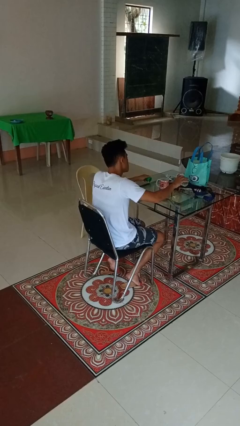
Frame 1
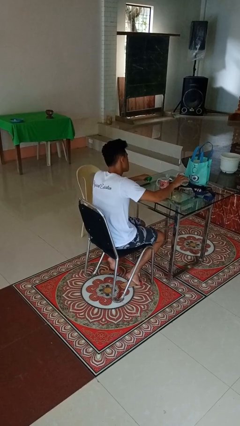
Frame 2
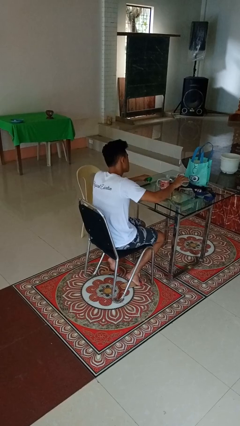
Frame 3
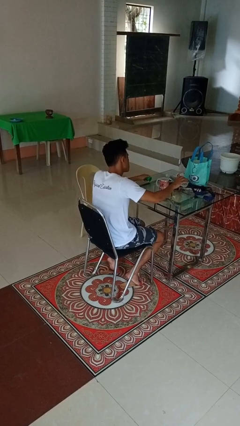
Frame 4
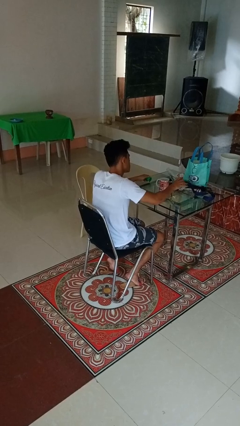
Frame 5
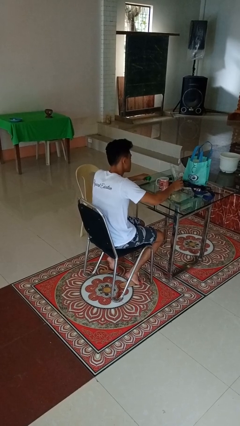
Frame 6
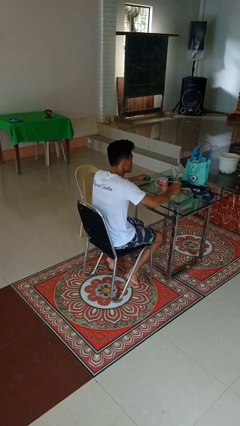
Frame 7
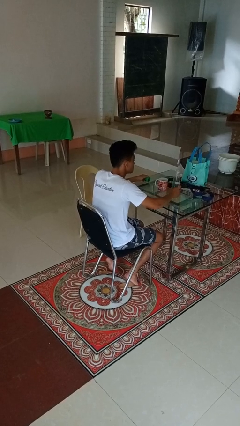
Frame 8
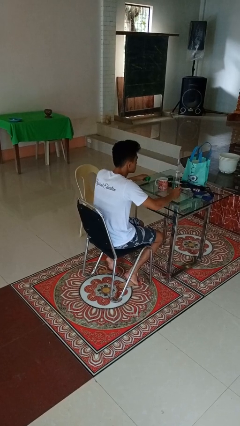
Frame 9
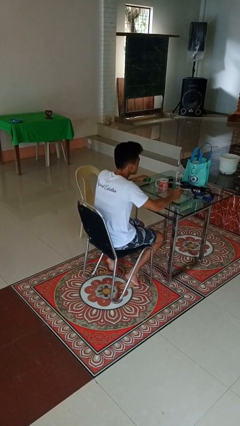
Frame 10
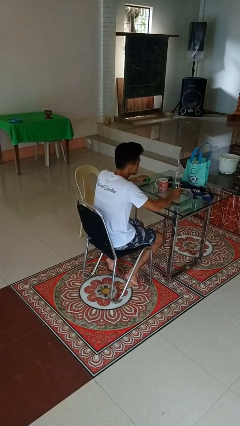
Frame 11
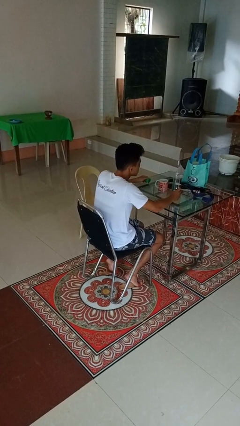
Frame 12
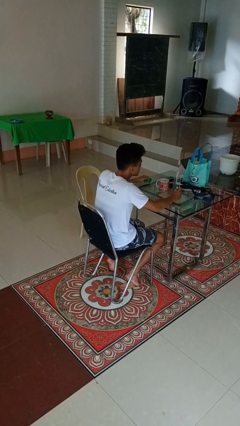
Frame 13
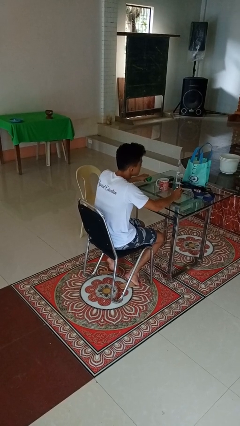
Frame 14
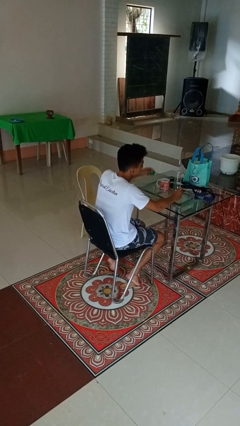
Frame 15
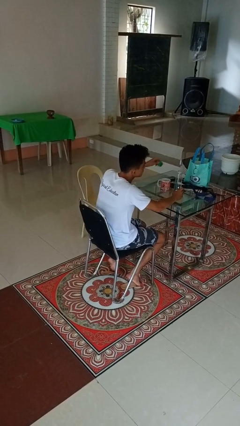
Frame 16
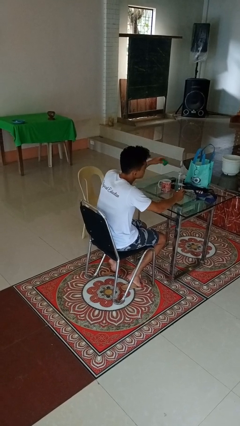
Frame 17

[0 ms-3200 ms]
person pours liquid into cup

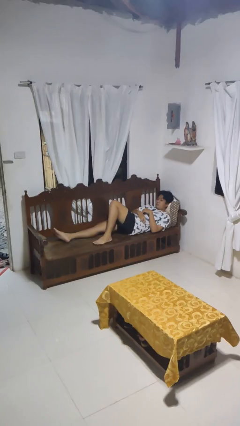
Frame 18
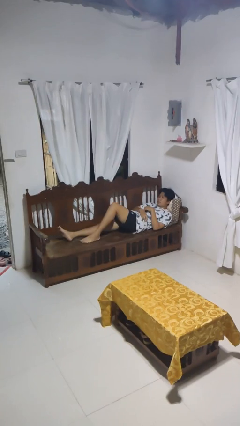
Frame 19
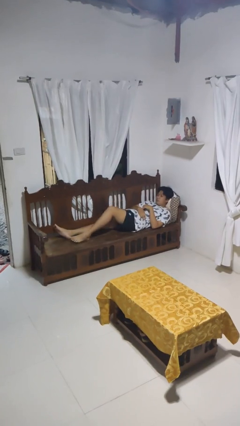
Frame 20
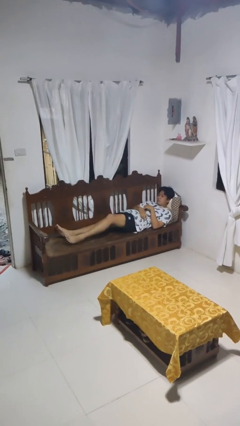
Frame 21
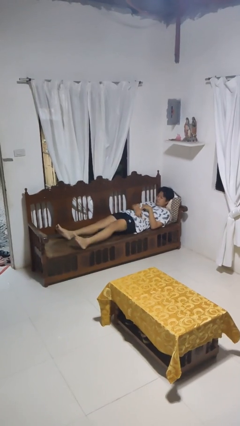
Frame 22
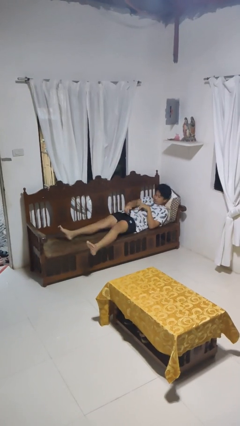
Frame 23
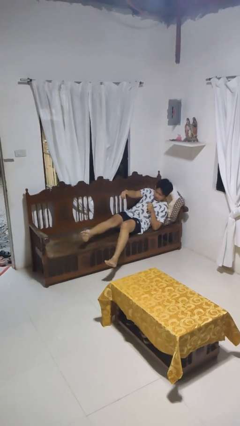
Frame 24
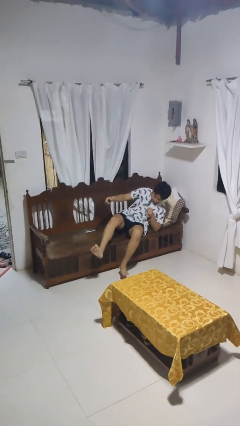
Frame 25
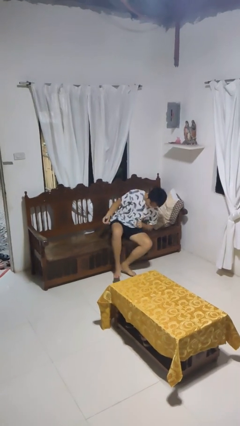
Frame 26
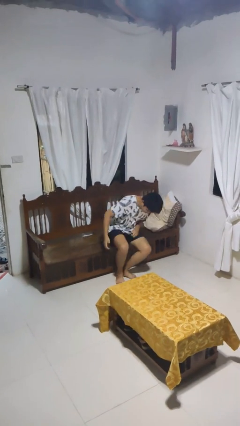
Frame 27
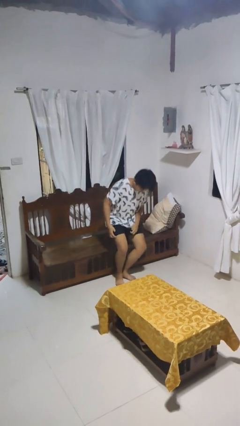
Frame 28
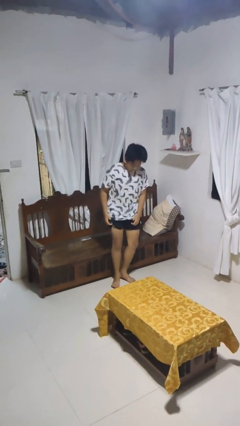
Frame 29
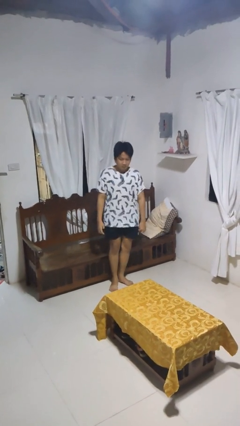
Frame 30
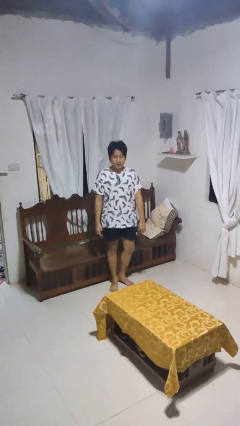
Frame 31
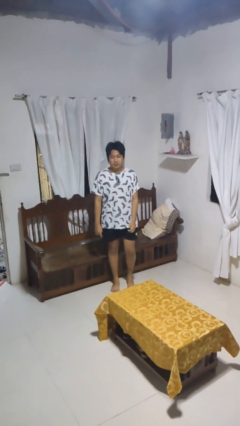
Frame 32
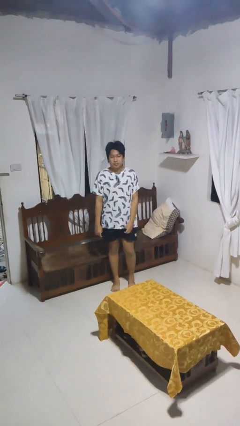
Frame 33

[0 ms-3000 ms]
person stands up

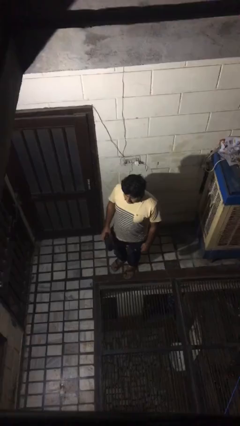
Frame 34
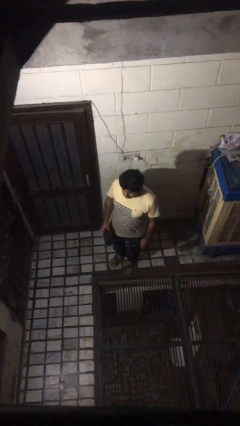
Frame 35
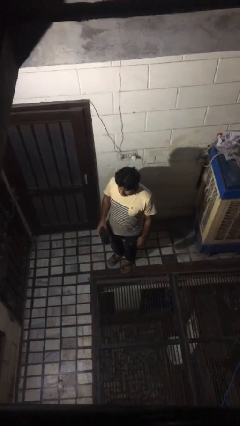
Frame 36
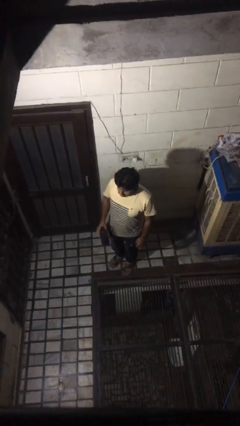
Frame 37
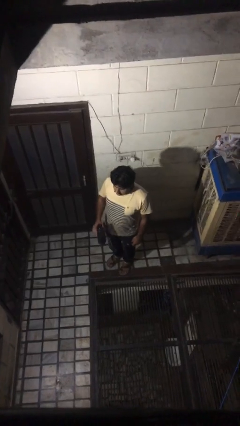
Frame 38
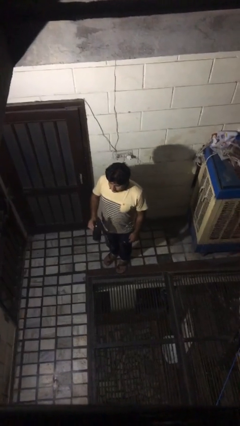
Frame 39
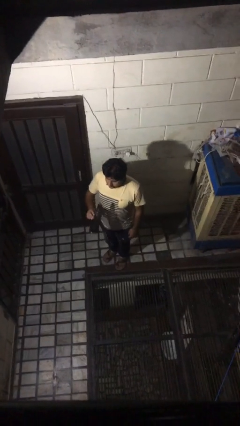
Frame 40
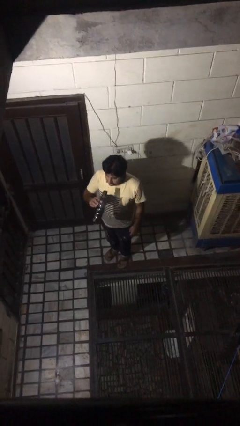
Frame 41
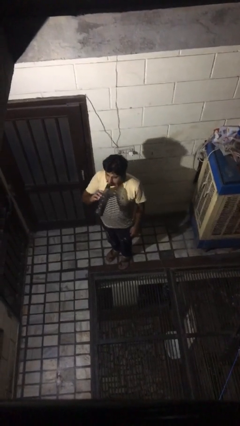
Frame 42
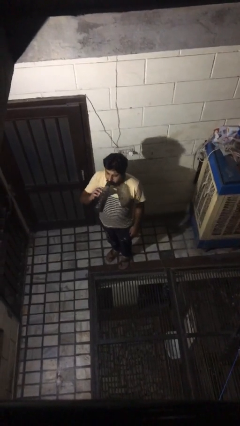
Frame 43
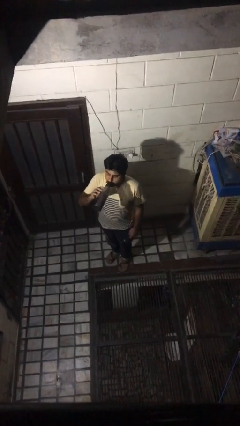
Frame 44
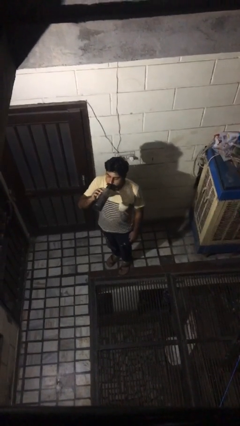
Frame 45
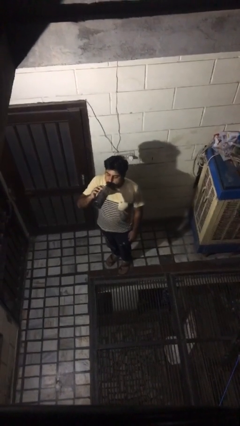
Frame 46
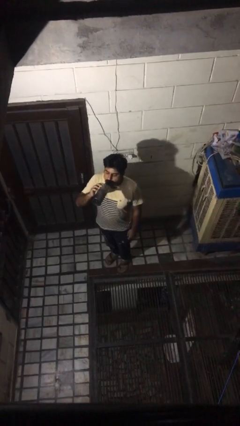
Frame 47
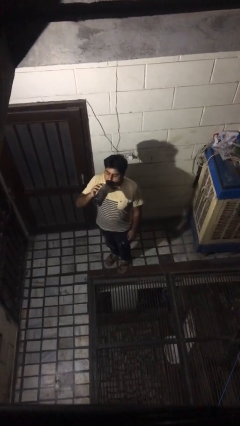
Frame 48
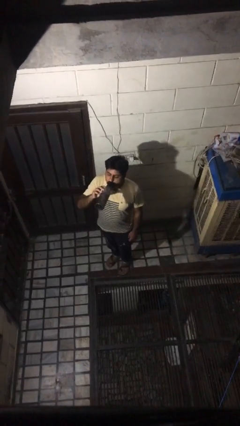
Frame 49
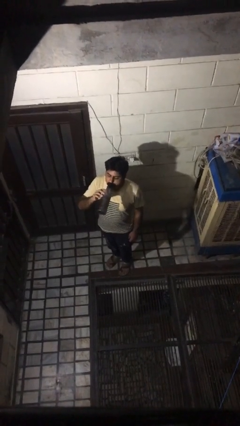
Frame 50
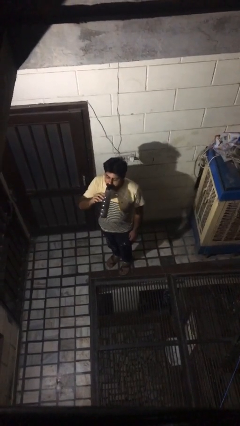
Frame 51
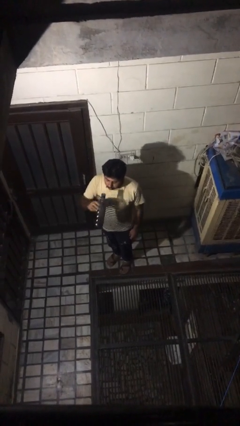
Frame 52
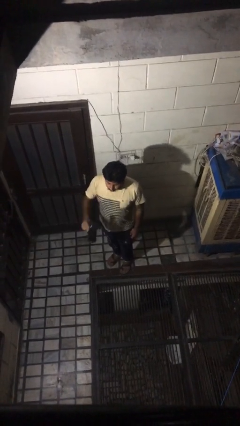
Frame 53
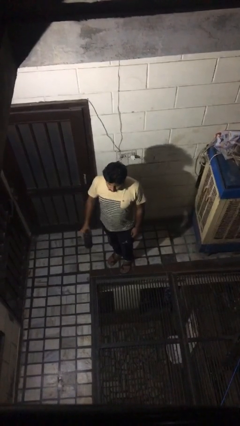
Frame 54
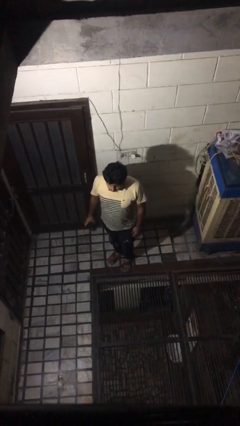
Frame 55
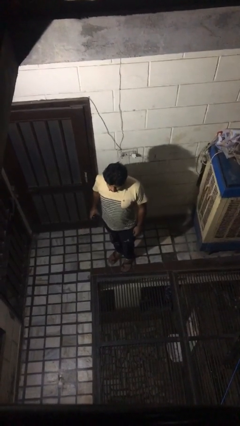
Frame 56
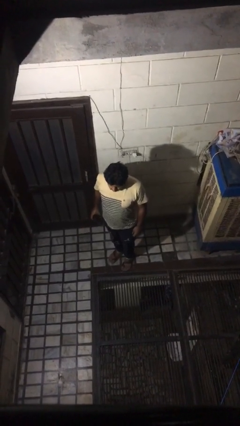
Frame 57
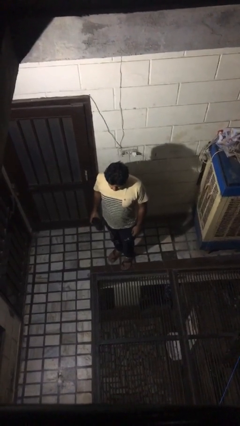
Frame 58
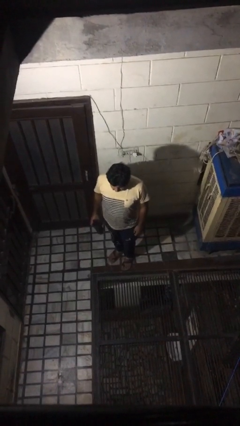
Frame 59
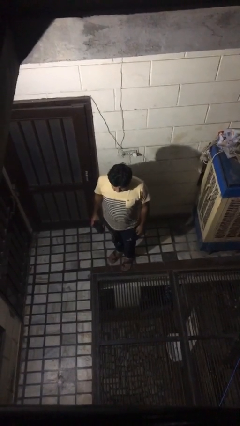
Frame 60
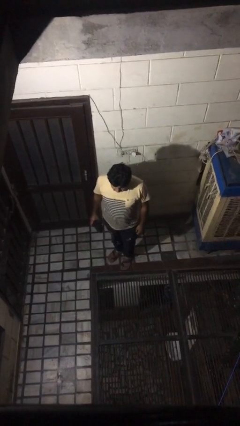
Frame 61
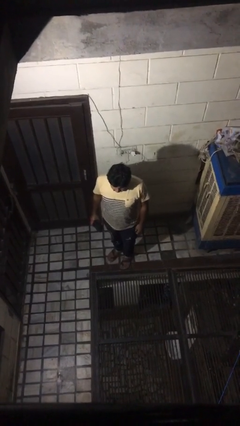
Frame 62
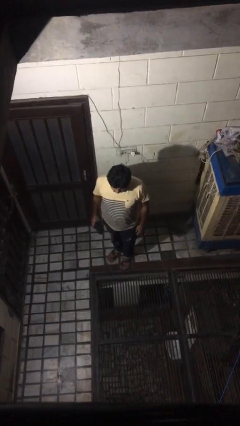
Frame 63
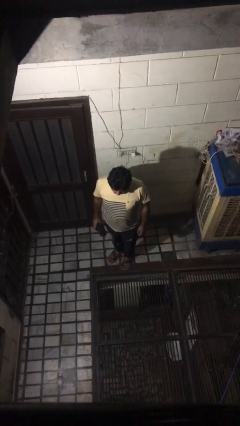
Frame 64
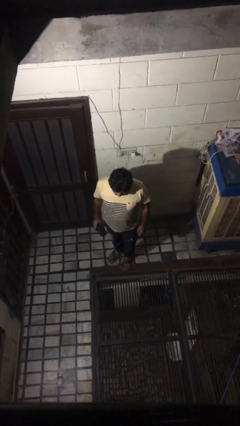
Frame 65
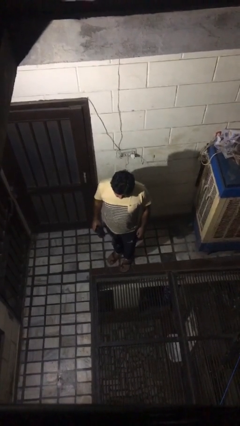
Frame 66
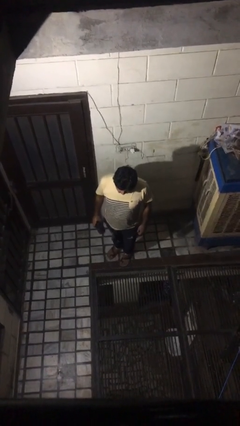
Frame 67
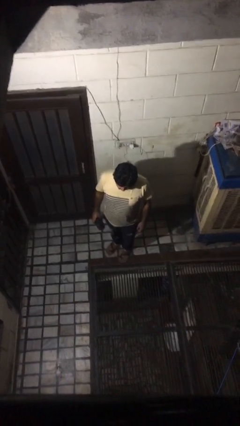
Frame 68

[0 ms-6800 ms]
person drinks from bottle

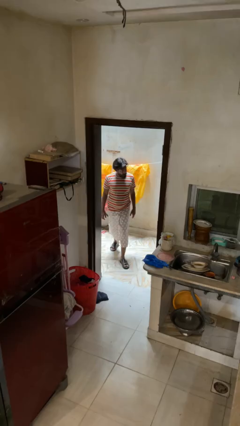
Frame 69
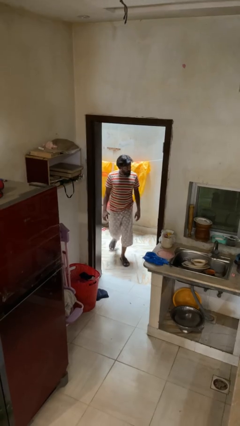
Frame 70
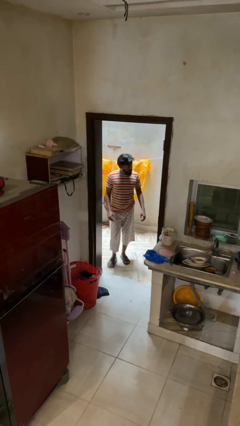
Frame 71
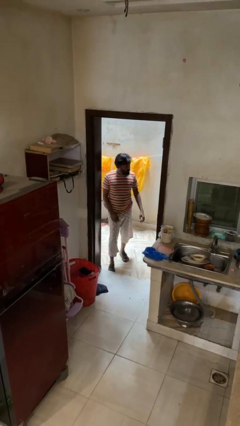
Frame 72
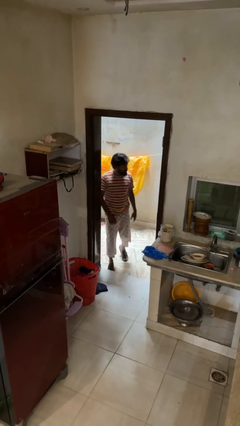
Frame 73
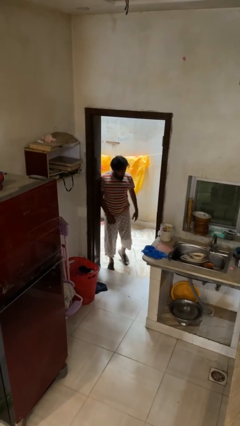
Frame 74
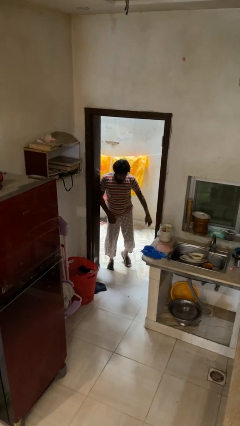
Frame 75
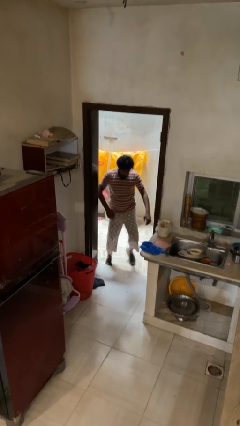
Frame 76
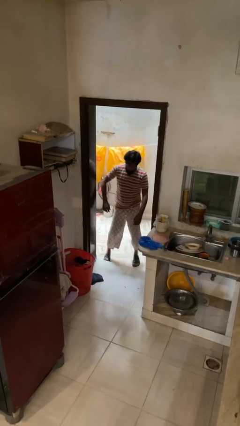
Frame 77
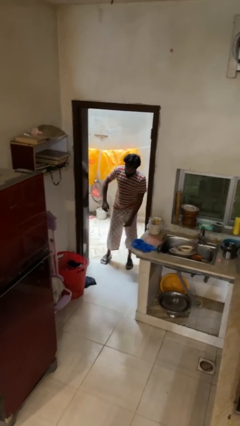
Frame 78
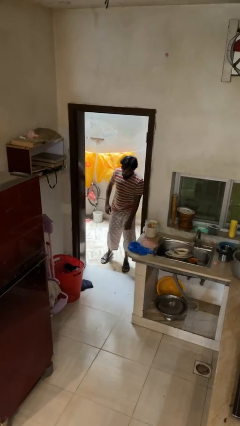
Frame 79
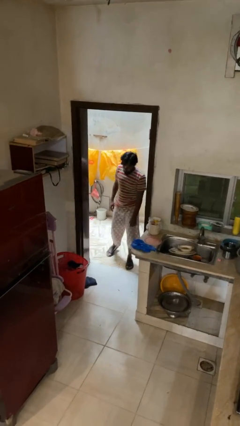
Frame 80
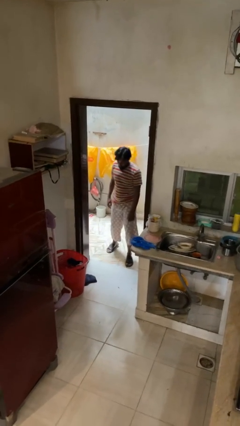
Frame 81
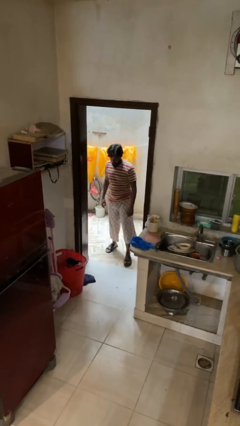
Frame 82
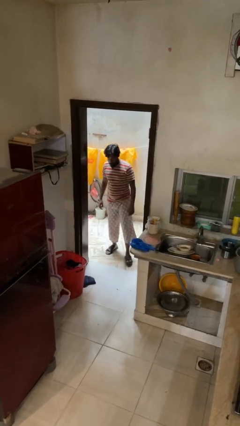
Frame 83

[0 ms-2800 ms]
person bumps into wall

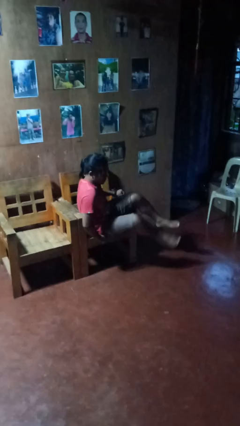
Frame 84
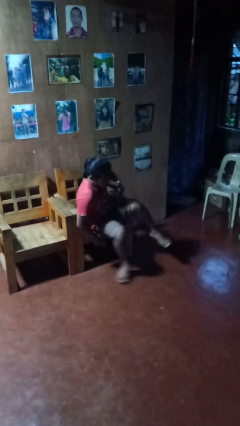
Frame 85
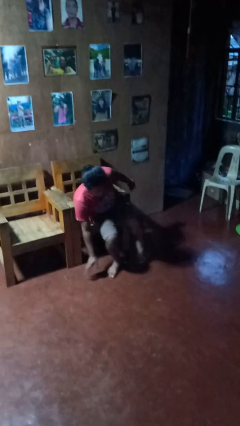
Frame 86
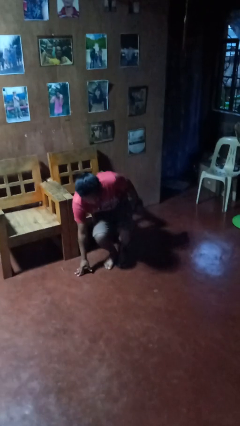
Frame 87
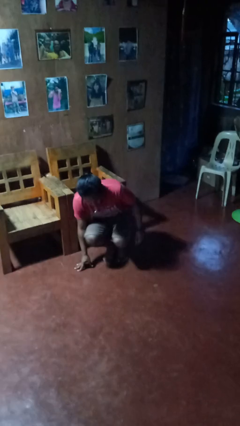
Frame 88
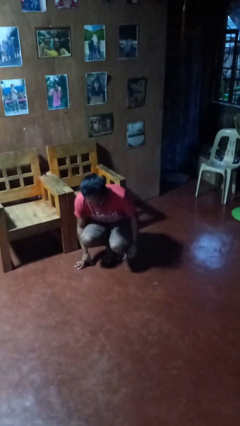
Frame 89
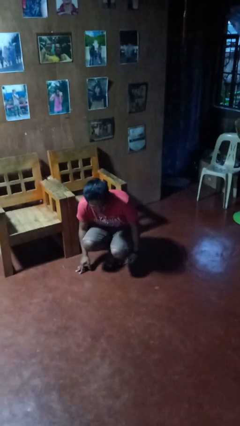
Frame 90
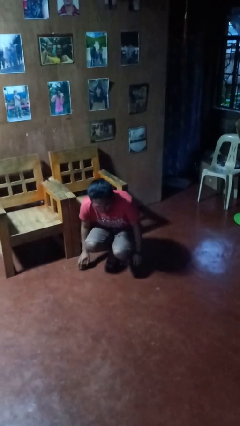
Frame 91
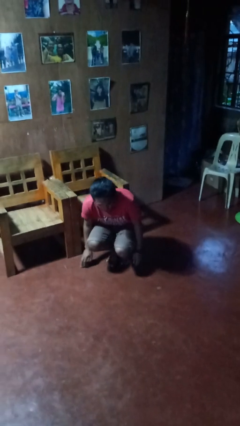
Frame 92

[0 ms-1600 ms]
person falls from chair

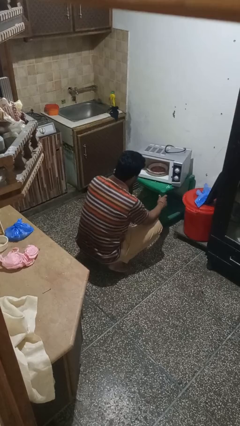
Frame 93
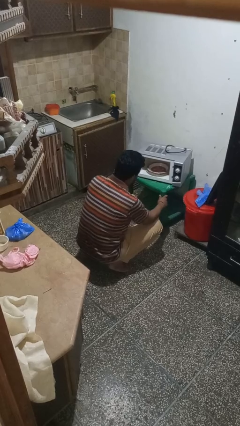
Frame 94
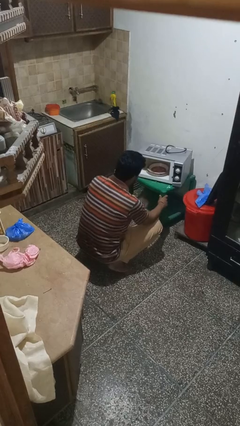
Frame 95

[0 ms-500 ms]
person takes object from microwave
